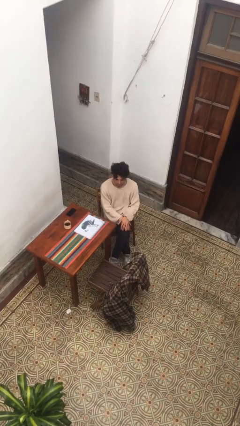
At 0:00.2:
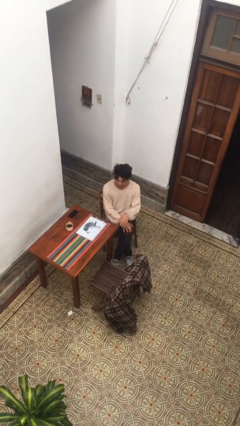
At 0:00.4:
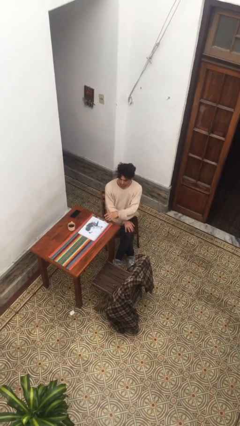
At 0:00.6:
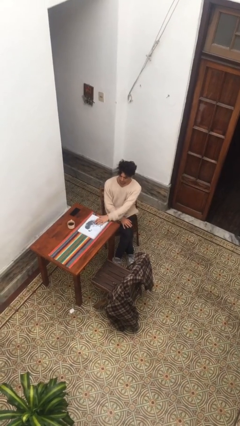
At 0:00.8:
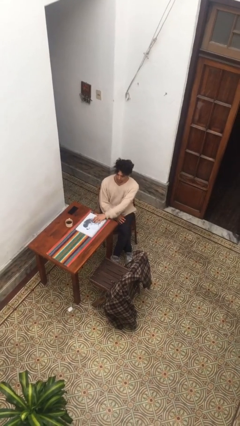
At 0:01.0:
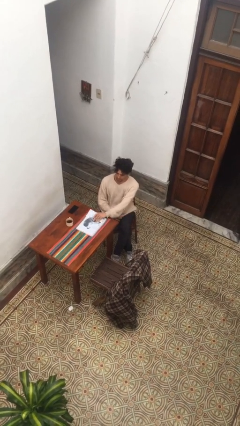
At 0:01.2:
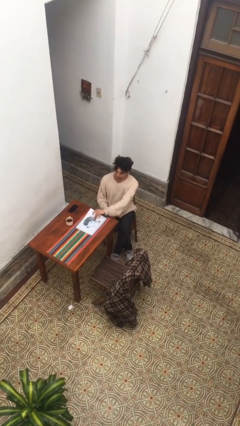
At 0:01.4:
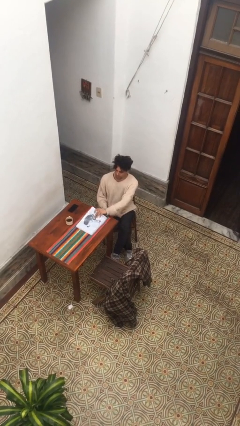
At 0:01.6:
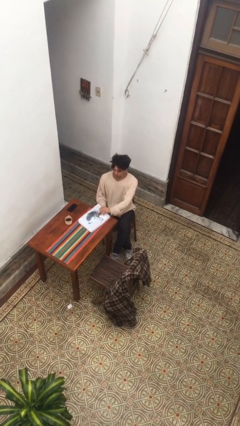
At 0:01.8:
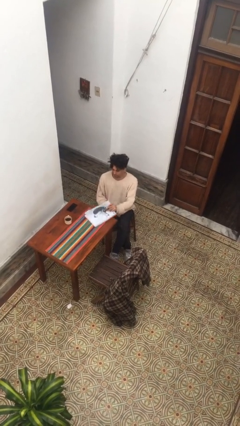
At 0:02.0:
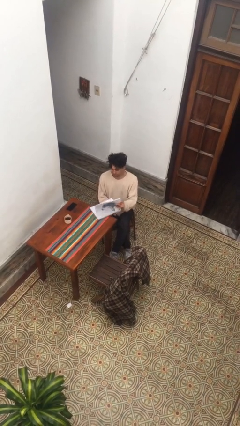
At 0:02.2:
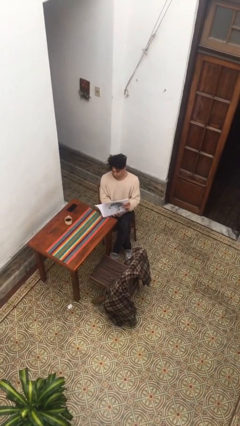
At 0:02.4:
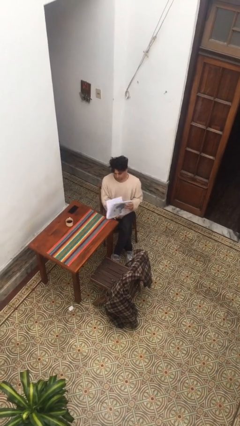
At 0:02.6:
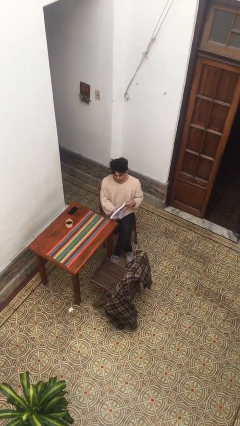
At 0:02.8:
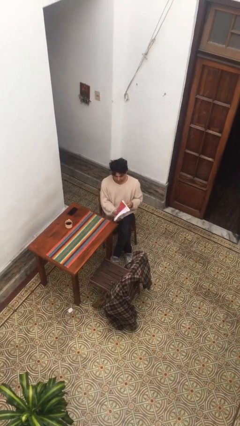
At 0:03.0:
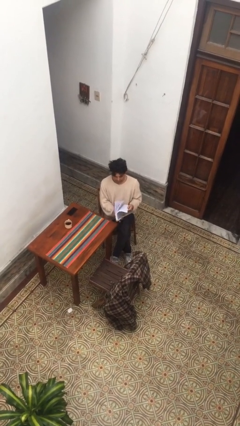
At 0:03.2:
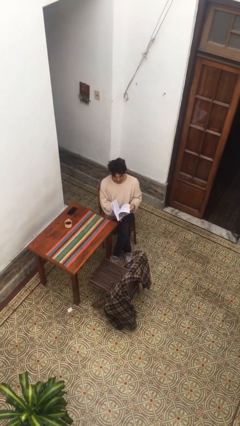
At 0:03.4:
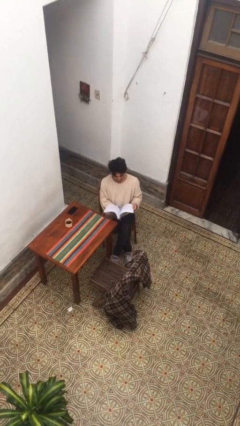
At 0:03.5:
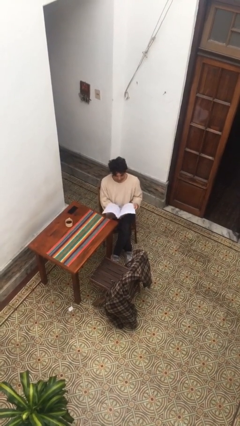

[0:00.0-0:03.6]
person picks up object from table

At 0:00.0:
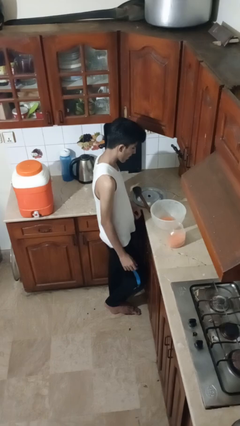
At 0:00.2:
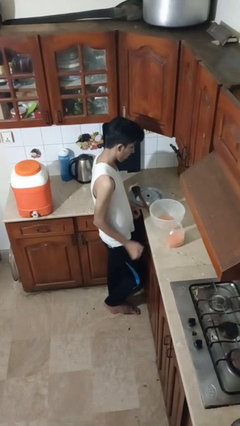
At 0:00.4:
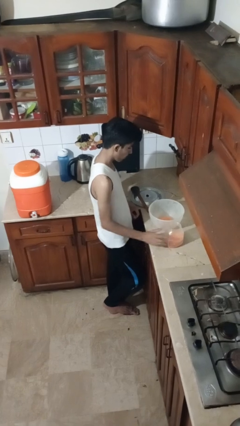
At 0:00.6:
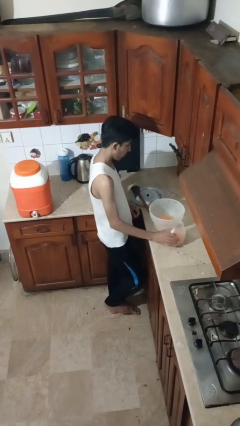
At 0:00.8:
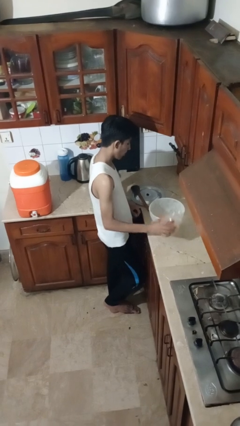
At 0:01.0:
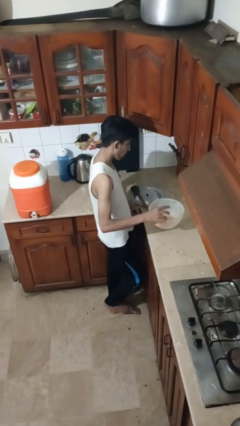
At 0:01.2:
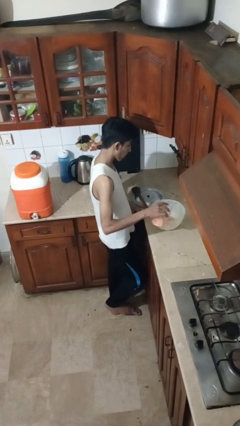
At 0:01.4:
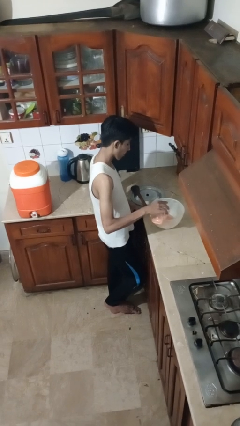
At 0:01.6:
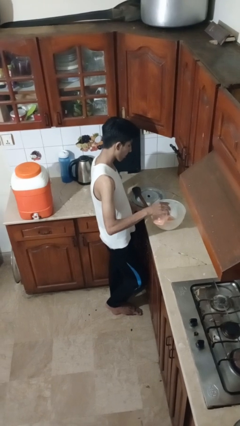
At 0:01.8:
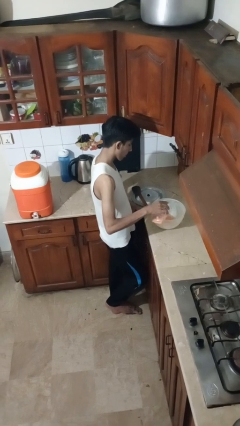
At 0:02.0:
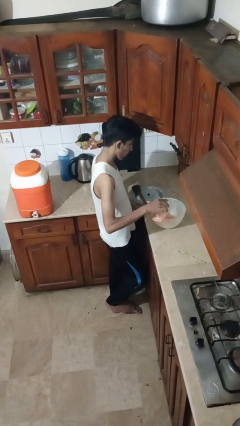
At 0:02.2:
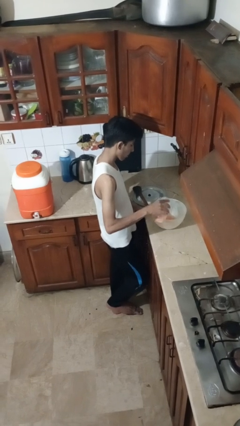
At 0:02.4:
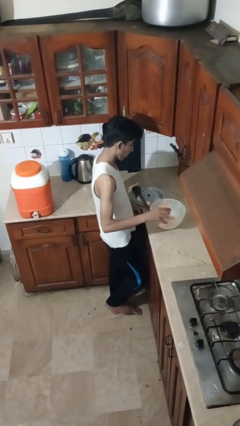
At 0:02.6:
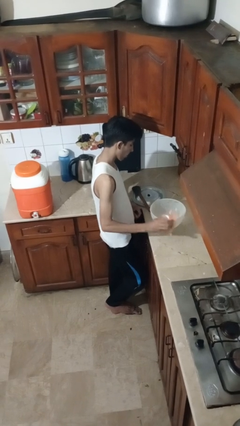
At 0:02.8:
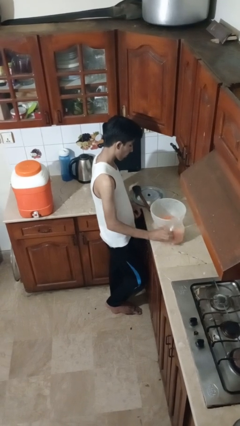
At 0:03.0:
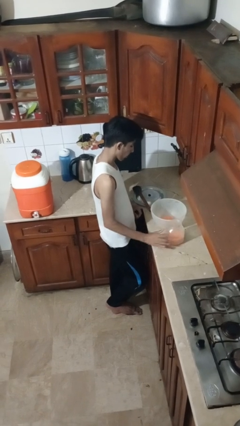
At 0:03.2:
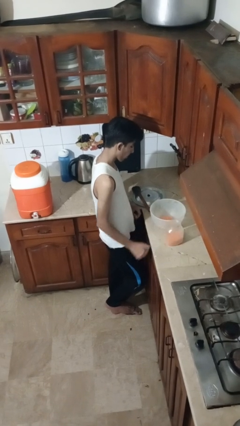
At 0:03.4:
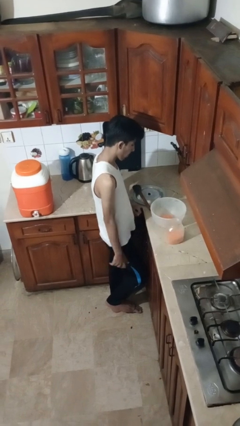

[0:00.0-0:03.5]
person pours into bowl

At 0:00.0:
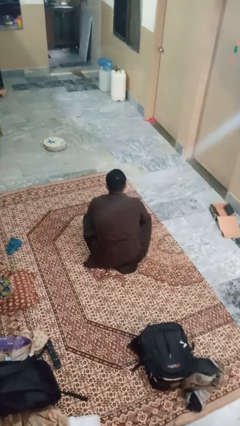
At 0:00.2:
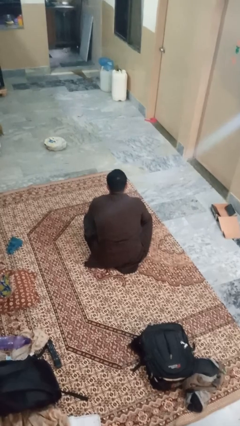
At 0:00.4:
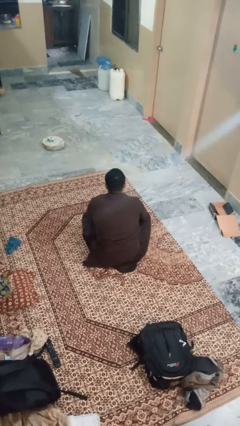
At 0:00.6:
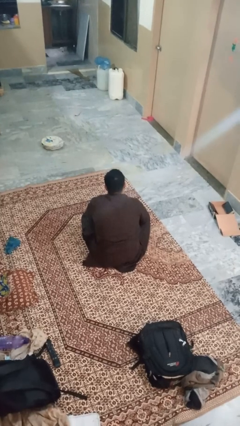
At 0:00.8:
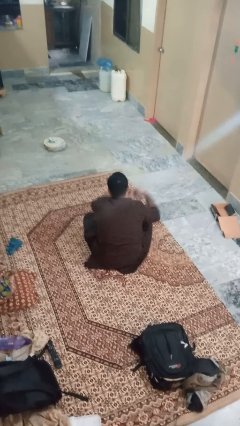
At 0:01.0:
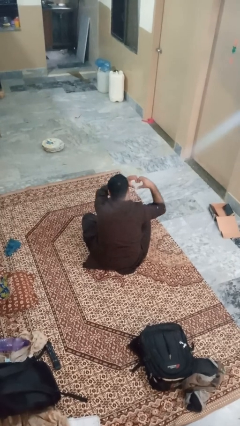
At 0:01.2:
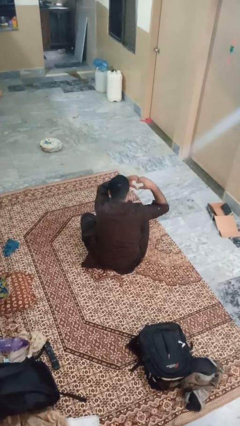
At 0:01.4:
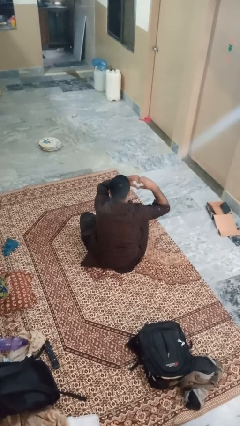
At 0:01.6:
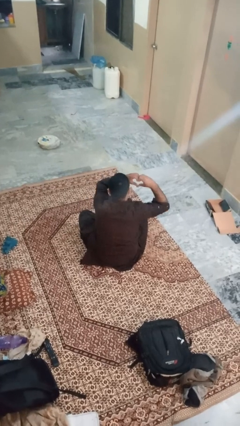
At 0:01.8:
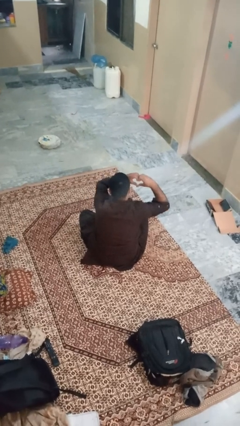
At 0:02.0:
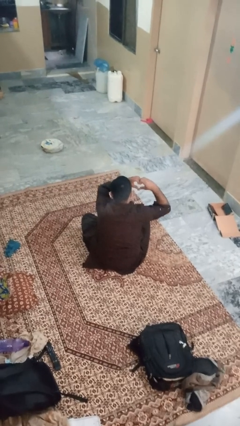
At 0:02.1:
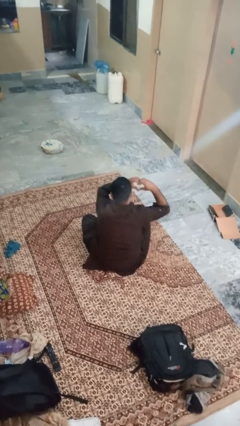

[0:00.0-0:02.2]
person gestures heart

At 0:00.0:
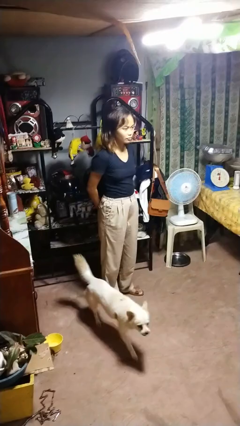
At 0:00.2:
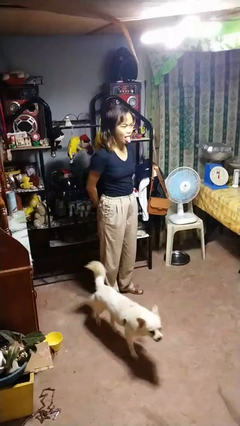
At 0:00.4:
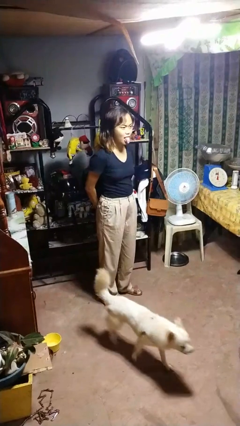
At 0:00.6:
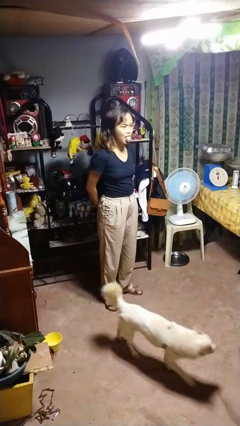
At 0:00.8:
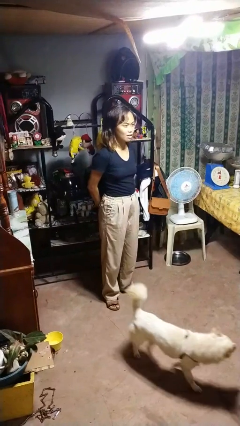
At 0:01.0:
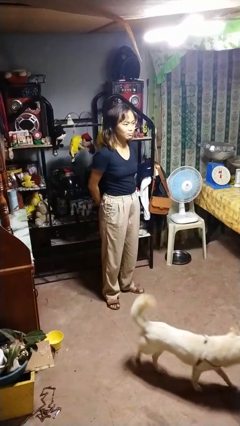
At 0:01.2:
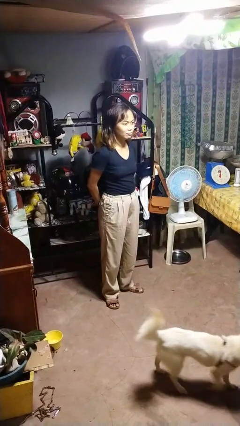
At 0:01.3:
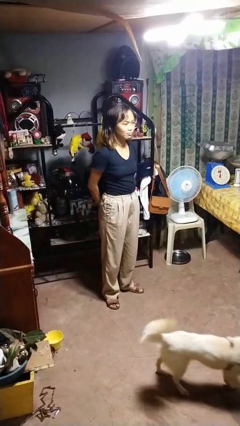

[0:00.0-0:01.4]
person sticks out tongue

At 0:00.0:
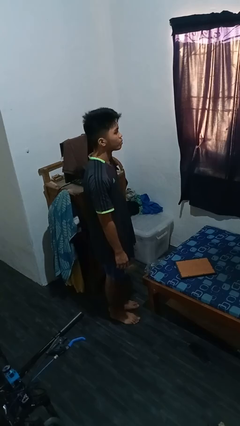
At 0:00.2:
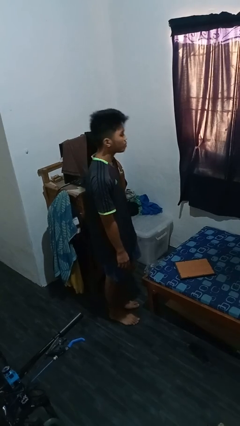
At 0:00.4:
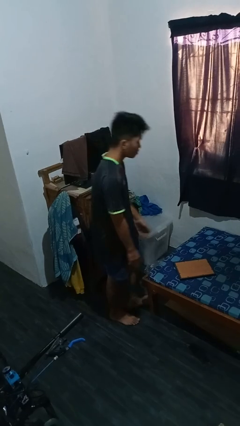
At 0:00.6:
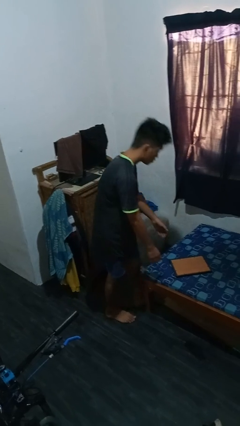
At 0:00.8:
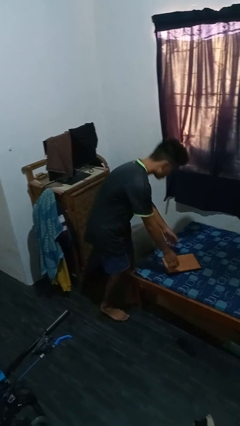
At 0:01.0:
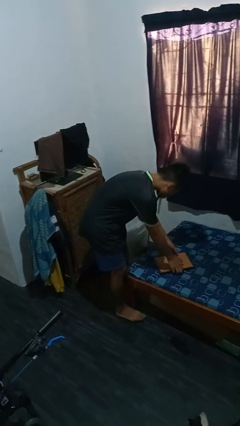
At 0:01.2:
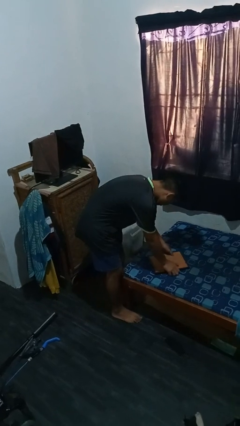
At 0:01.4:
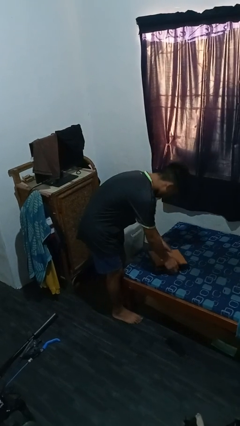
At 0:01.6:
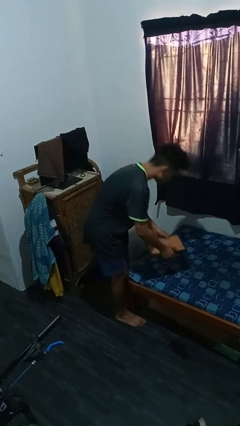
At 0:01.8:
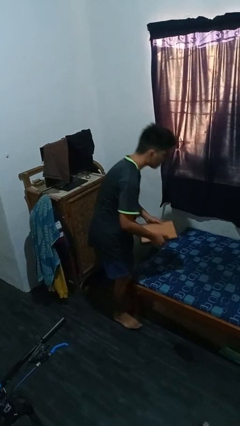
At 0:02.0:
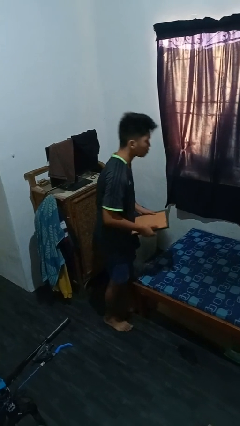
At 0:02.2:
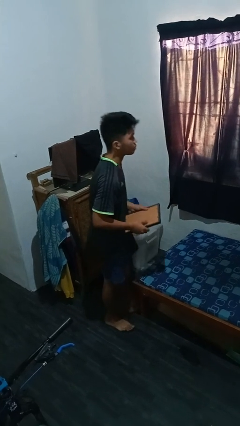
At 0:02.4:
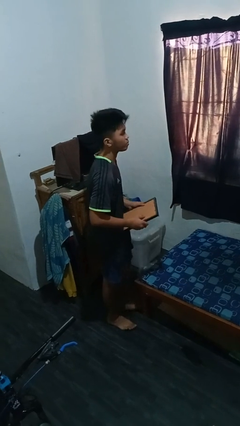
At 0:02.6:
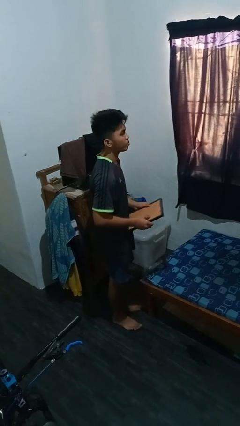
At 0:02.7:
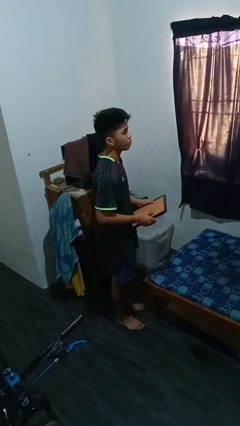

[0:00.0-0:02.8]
person picks up object from bed

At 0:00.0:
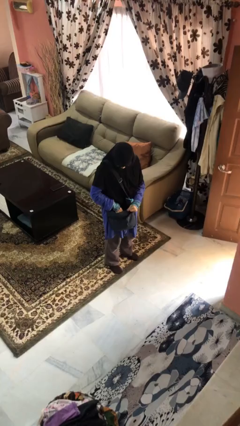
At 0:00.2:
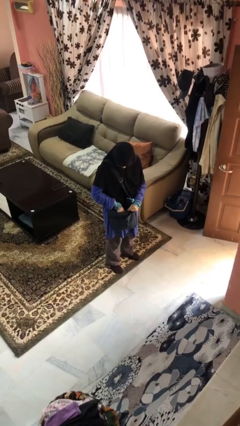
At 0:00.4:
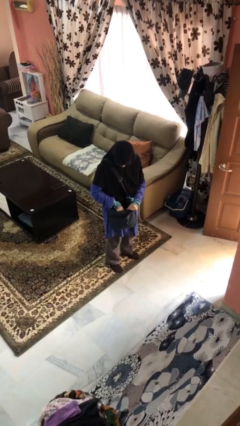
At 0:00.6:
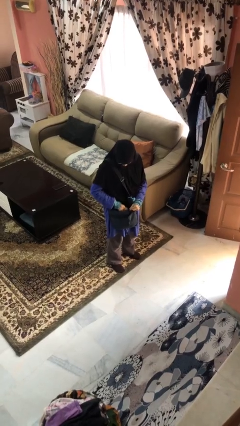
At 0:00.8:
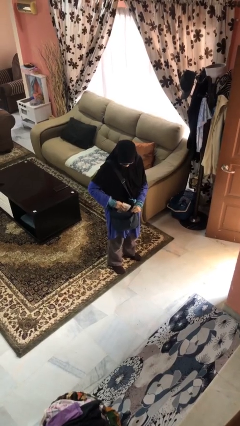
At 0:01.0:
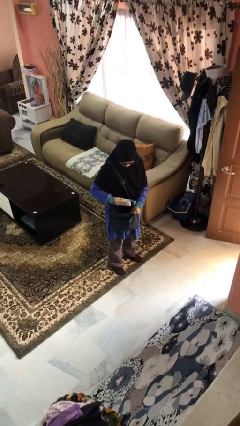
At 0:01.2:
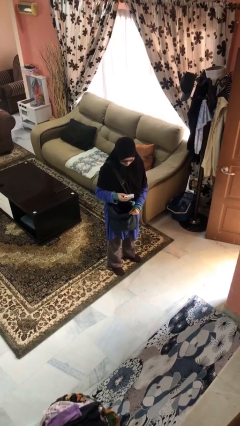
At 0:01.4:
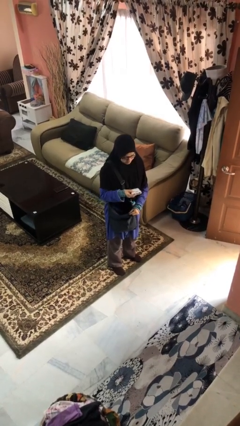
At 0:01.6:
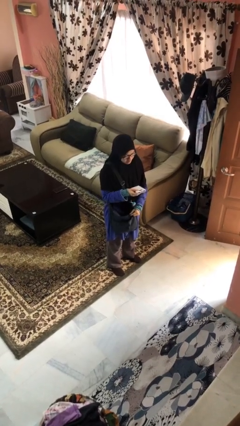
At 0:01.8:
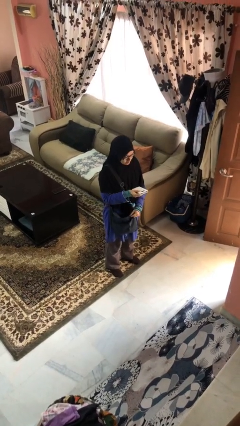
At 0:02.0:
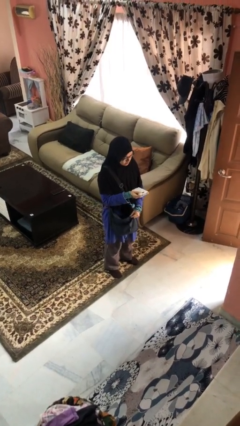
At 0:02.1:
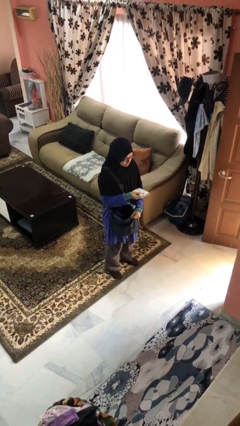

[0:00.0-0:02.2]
person takes object from purse

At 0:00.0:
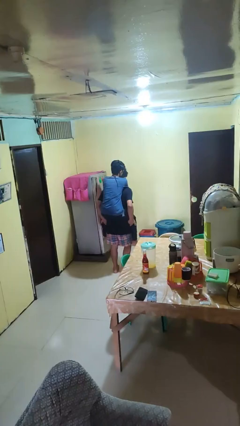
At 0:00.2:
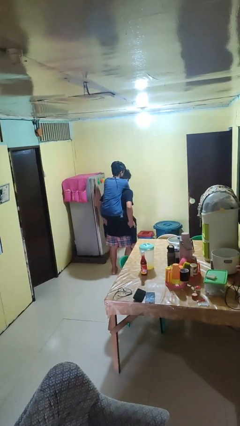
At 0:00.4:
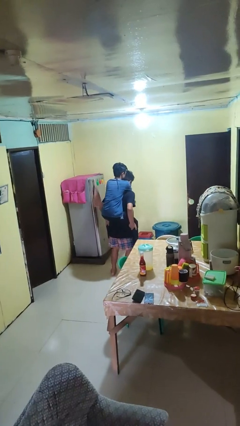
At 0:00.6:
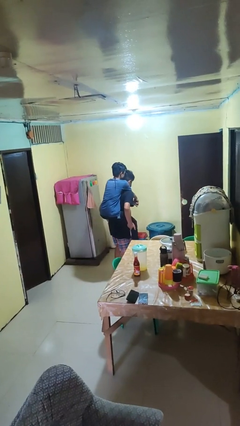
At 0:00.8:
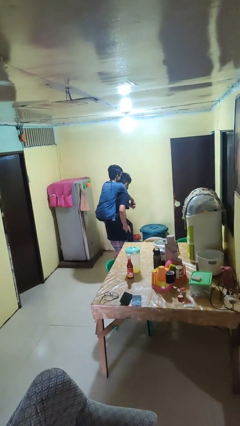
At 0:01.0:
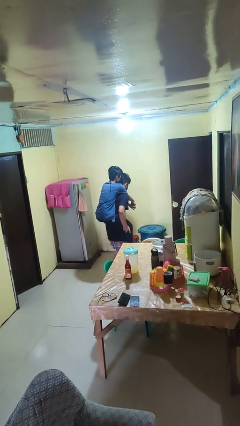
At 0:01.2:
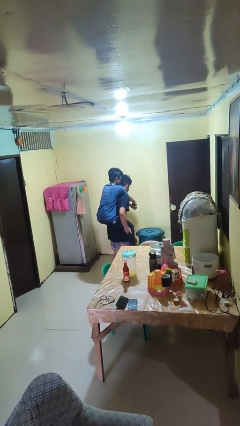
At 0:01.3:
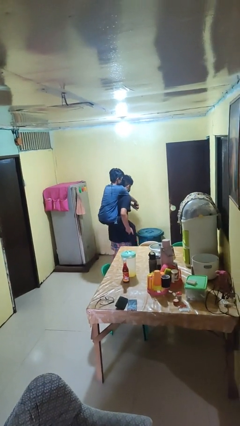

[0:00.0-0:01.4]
person carries person on back
